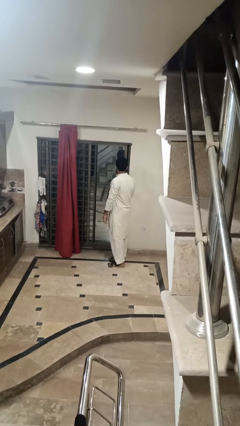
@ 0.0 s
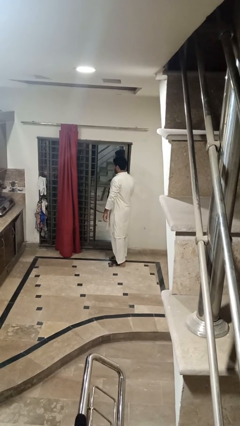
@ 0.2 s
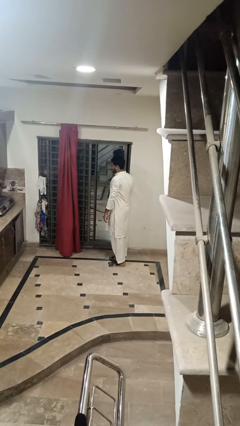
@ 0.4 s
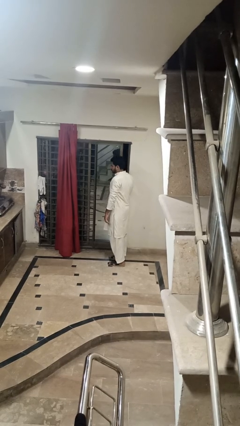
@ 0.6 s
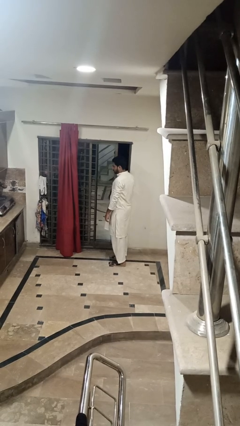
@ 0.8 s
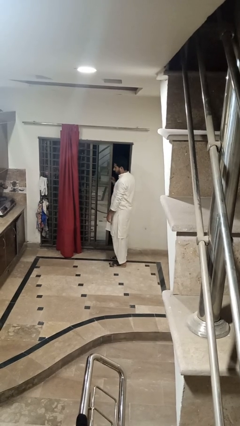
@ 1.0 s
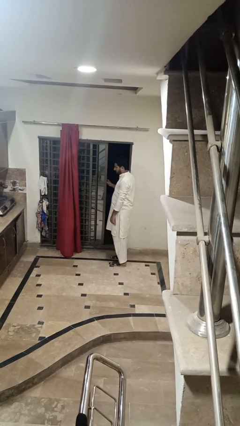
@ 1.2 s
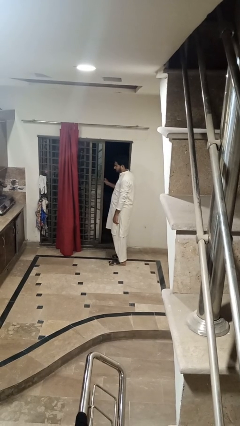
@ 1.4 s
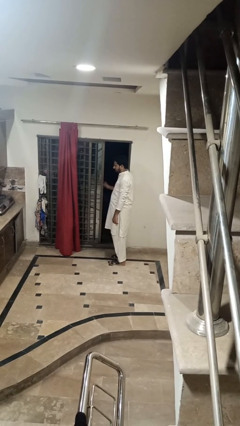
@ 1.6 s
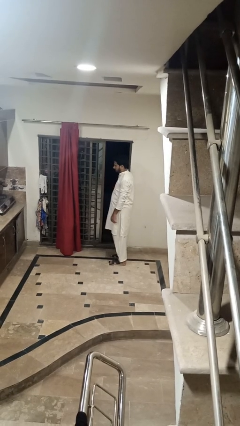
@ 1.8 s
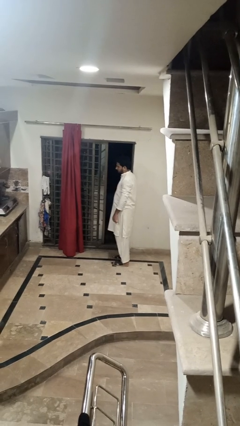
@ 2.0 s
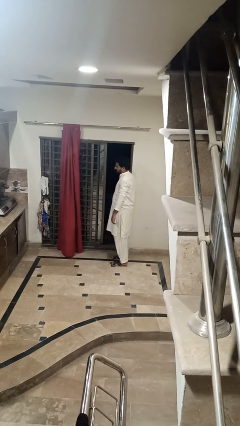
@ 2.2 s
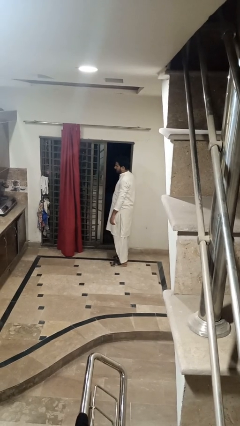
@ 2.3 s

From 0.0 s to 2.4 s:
person opens home window

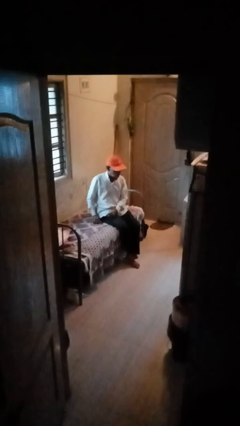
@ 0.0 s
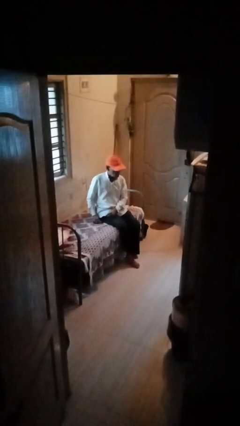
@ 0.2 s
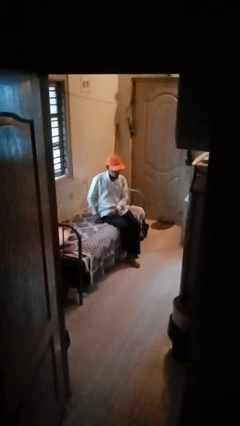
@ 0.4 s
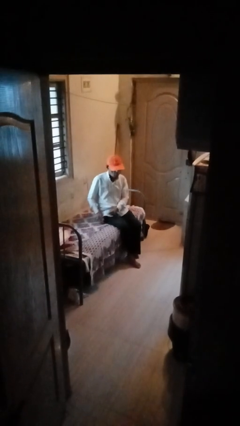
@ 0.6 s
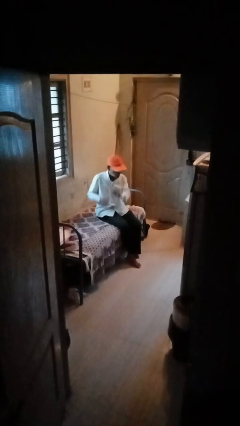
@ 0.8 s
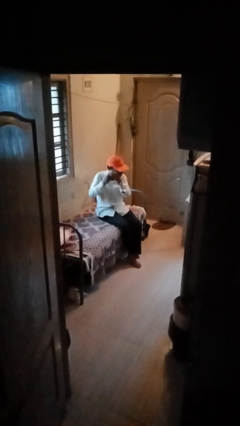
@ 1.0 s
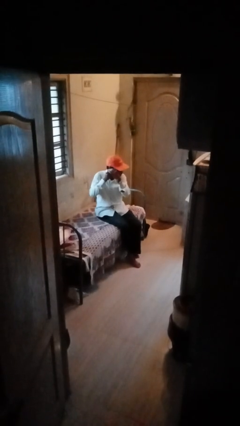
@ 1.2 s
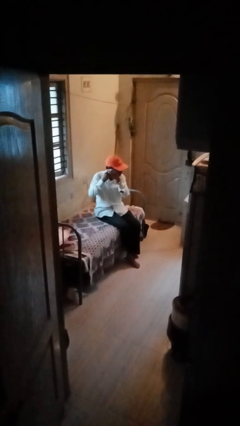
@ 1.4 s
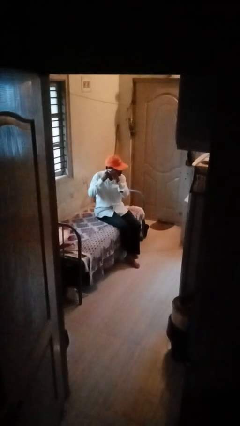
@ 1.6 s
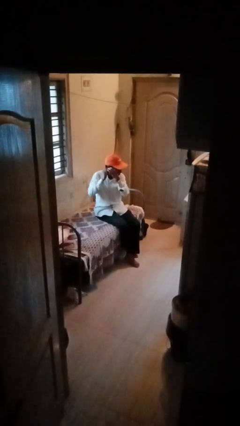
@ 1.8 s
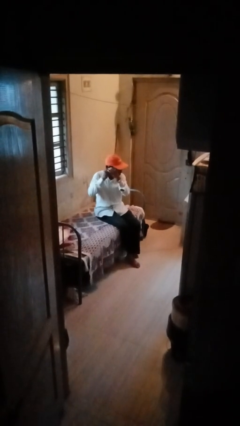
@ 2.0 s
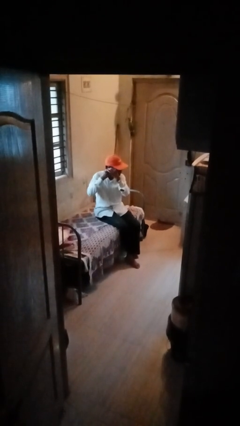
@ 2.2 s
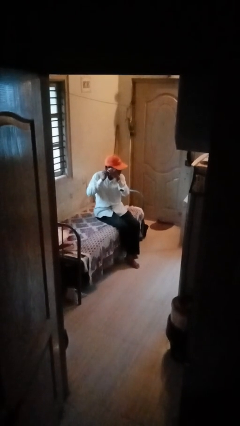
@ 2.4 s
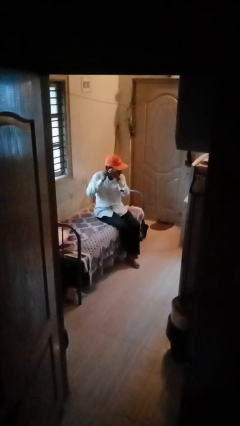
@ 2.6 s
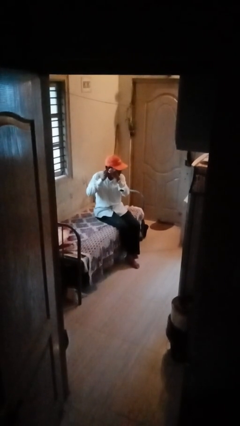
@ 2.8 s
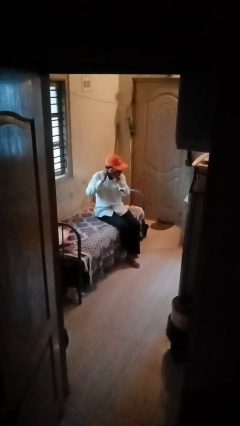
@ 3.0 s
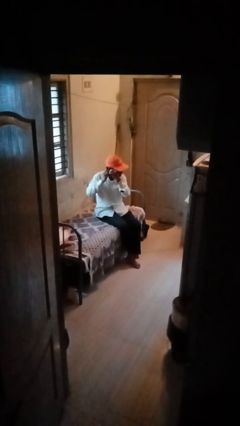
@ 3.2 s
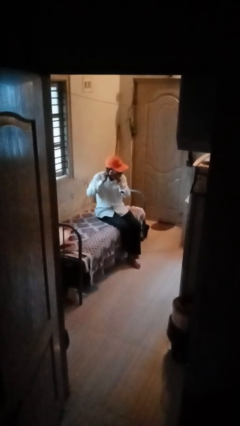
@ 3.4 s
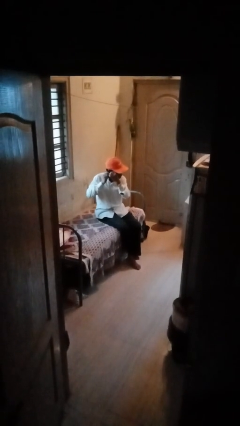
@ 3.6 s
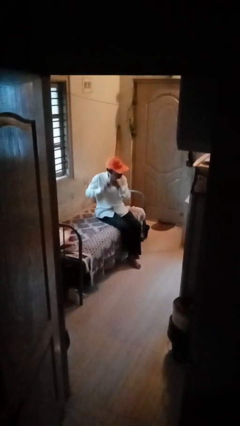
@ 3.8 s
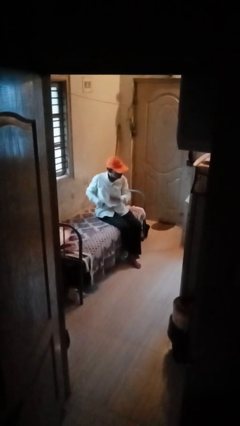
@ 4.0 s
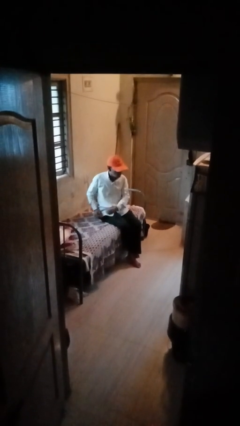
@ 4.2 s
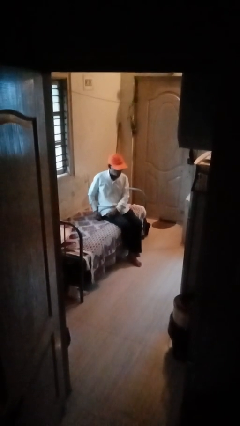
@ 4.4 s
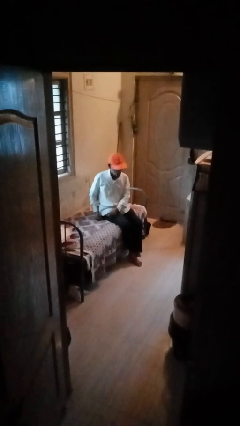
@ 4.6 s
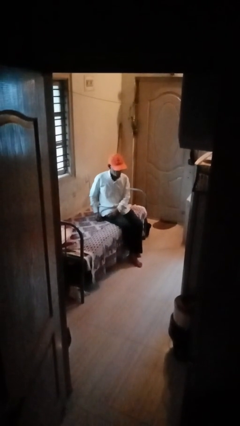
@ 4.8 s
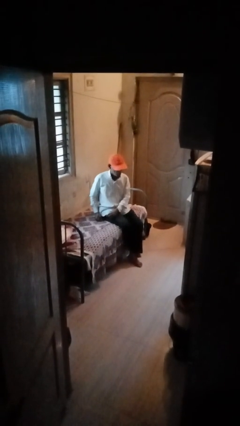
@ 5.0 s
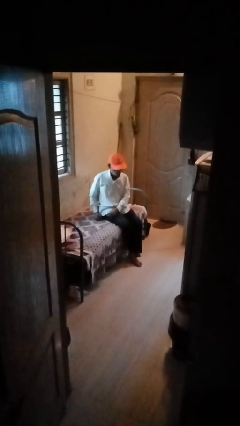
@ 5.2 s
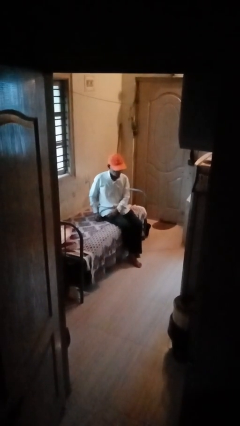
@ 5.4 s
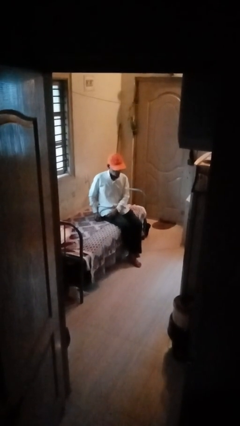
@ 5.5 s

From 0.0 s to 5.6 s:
person takes off earrings

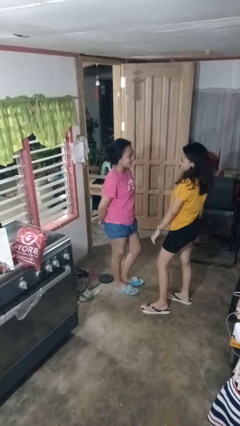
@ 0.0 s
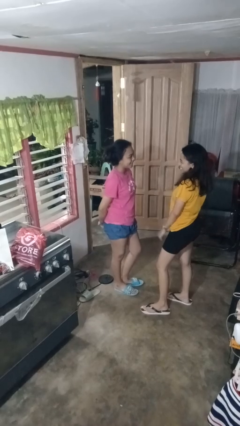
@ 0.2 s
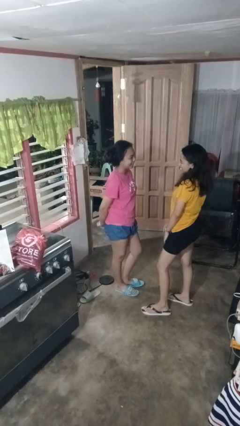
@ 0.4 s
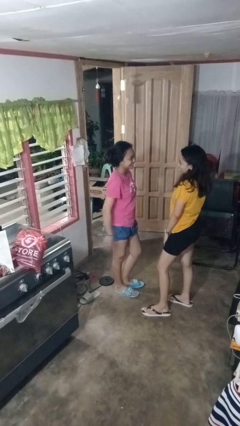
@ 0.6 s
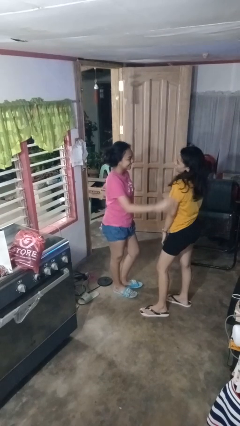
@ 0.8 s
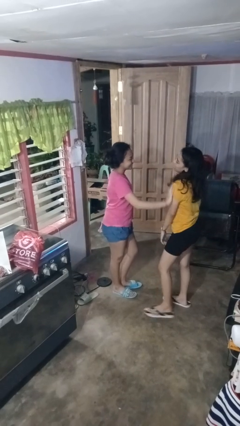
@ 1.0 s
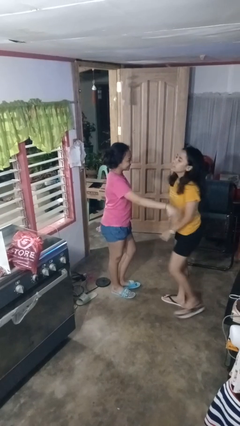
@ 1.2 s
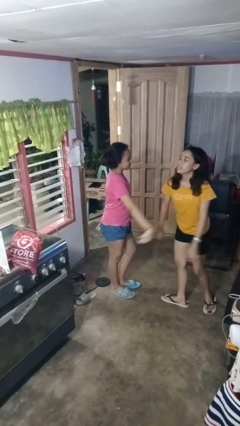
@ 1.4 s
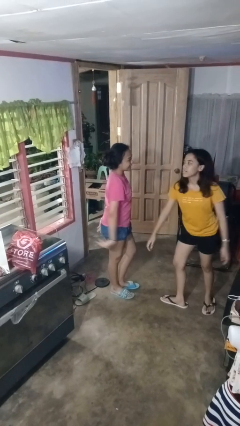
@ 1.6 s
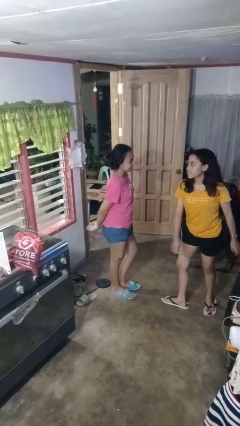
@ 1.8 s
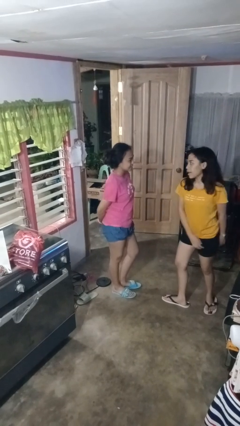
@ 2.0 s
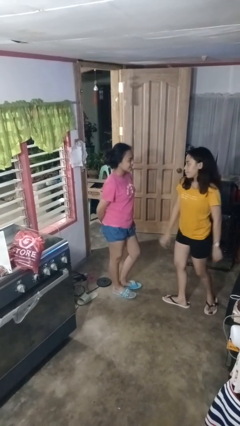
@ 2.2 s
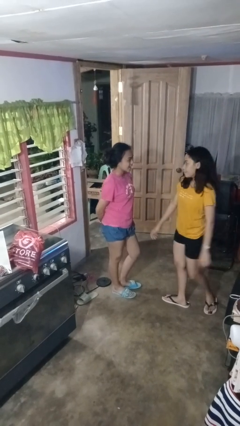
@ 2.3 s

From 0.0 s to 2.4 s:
person shoves person

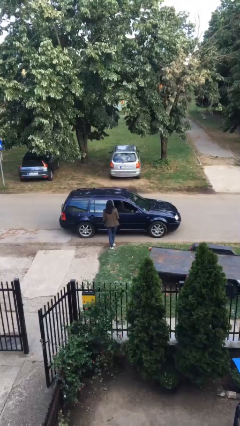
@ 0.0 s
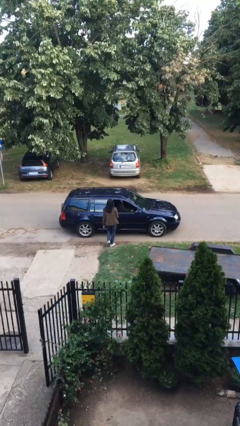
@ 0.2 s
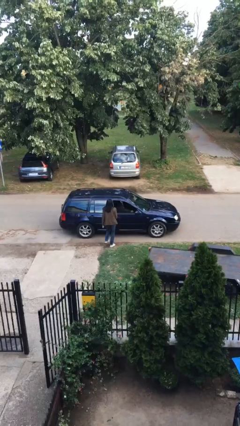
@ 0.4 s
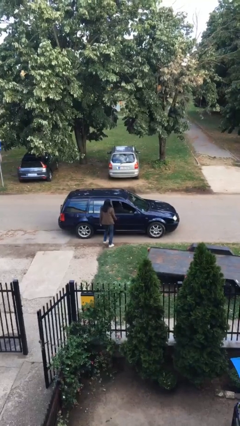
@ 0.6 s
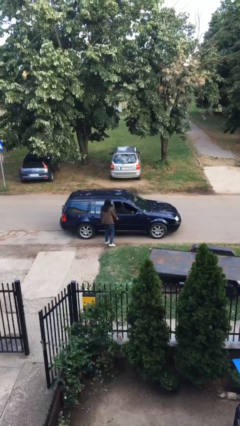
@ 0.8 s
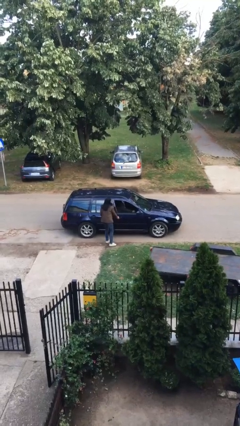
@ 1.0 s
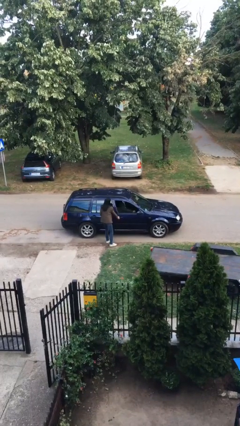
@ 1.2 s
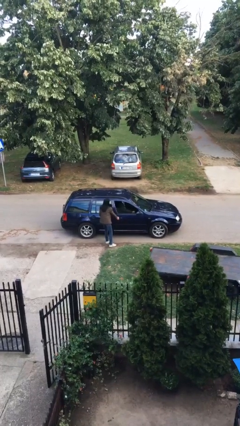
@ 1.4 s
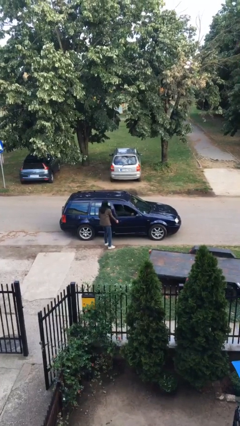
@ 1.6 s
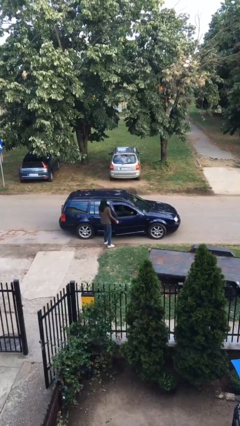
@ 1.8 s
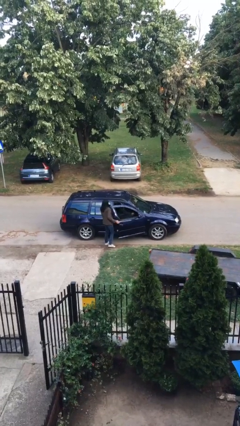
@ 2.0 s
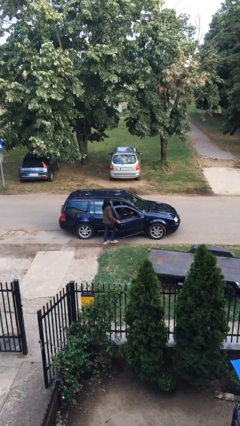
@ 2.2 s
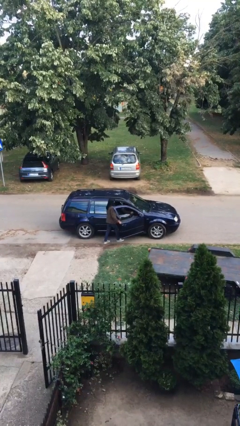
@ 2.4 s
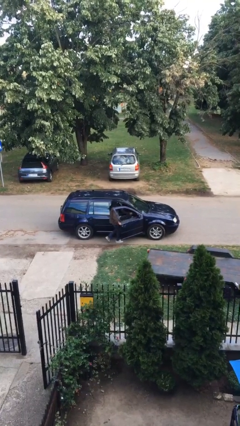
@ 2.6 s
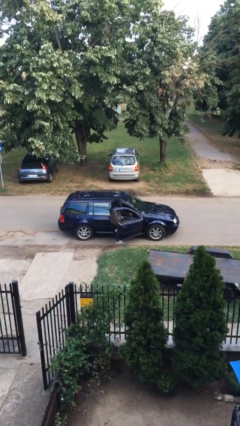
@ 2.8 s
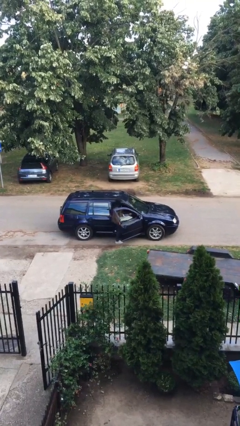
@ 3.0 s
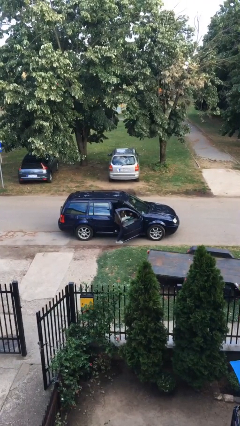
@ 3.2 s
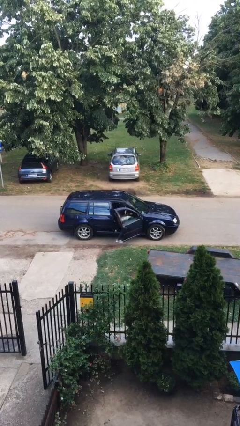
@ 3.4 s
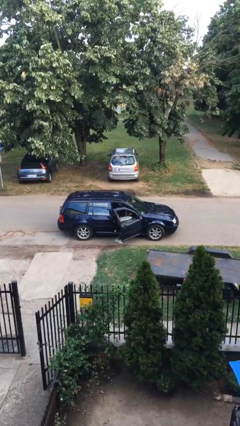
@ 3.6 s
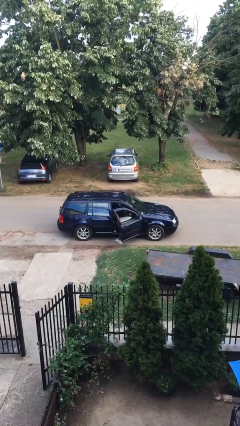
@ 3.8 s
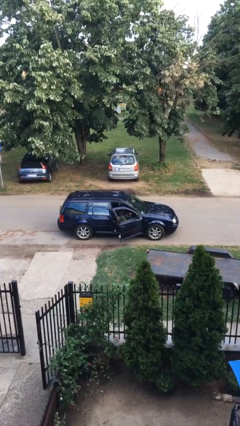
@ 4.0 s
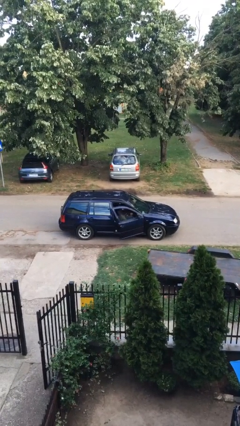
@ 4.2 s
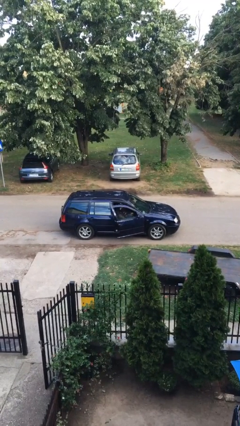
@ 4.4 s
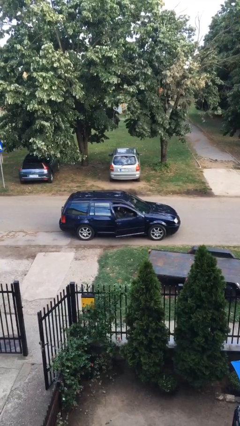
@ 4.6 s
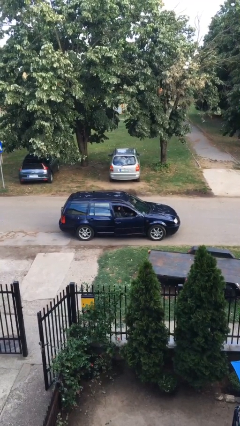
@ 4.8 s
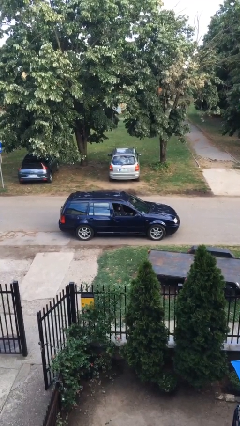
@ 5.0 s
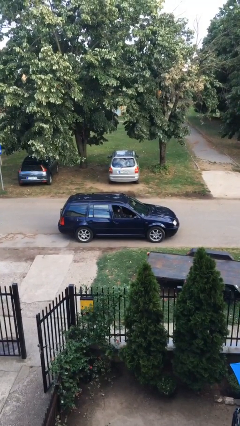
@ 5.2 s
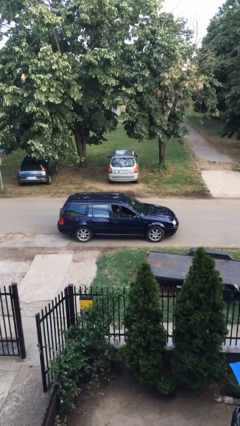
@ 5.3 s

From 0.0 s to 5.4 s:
car picks up person

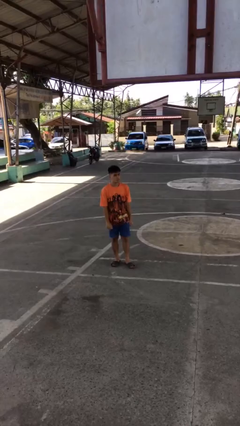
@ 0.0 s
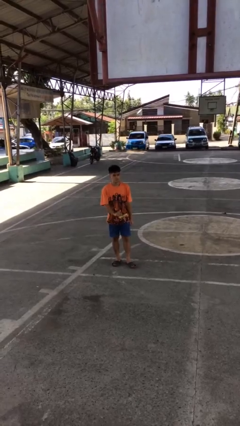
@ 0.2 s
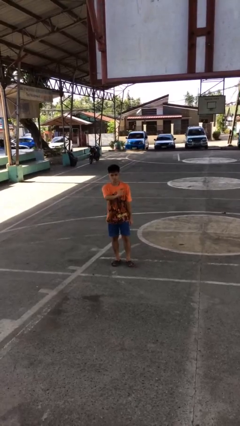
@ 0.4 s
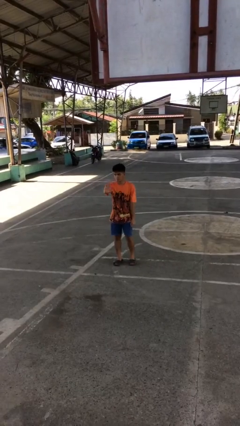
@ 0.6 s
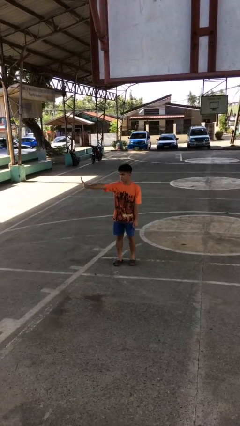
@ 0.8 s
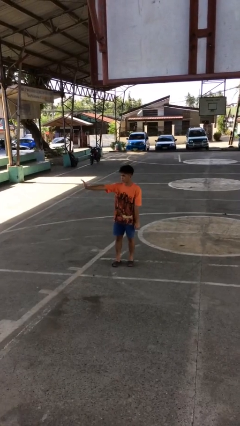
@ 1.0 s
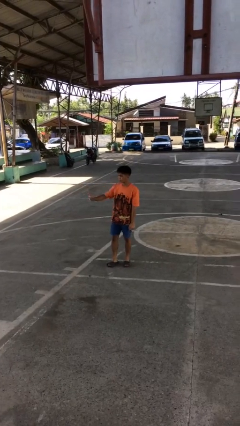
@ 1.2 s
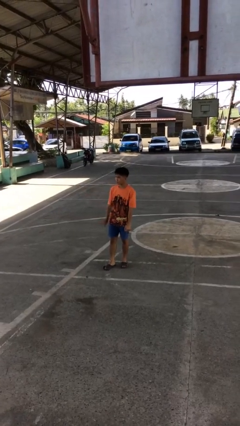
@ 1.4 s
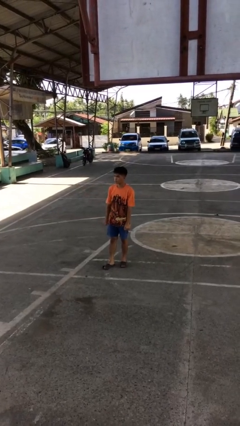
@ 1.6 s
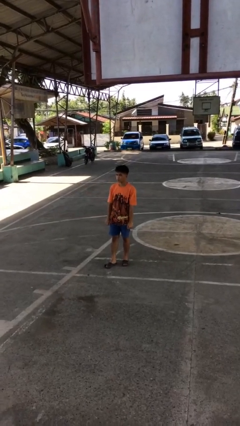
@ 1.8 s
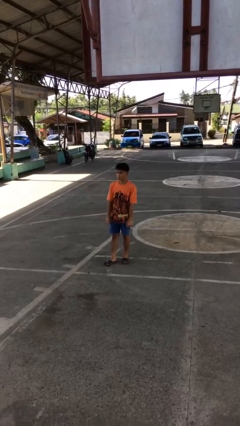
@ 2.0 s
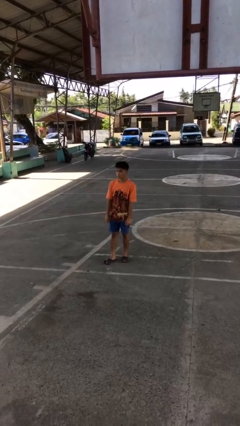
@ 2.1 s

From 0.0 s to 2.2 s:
person gestures swipe right
